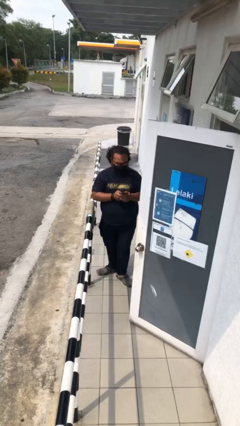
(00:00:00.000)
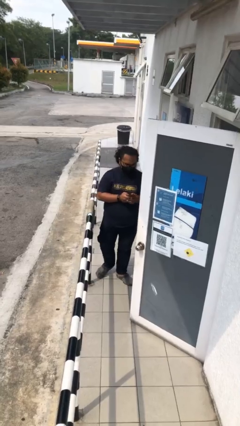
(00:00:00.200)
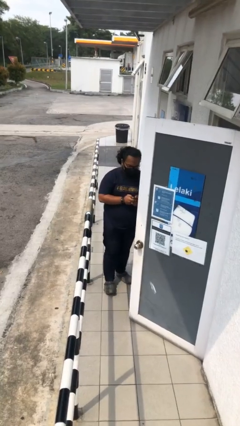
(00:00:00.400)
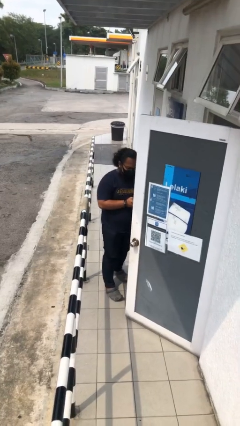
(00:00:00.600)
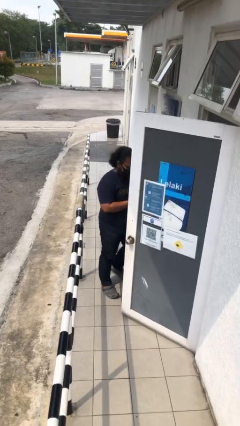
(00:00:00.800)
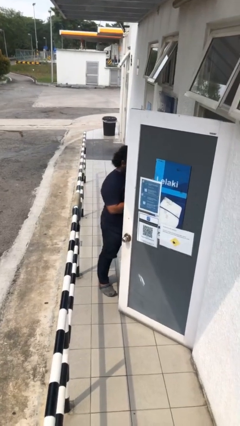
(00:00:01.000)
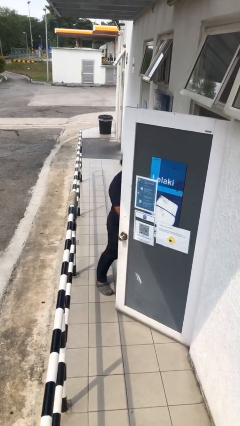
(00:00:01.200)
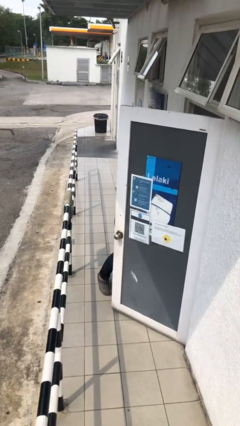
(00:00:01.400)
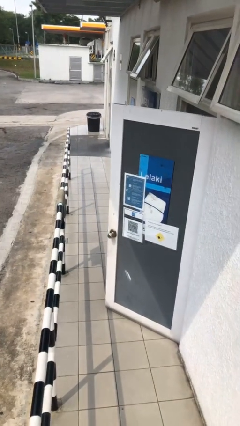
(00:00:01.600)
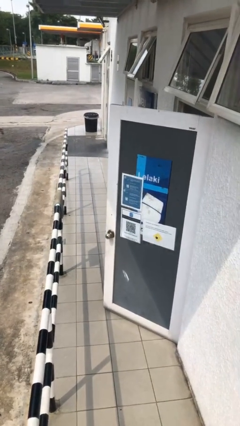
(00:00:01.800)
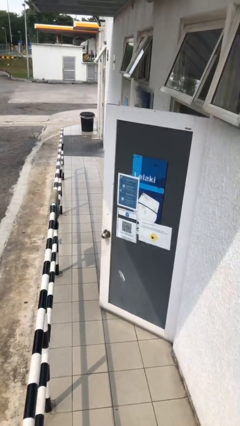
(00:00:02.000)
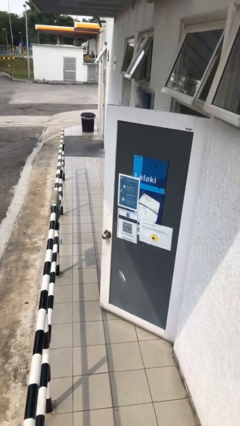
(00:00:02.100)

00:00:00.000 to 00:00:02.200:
person exits scene through structure

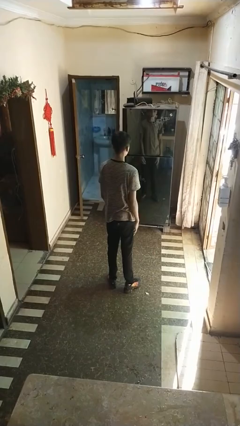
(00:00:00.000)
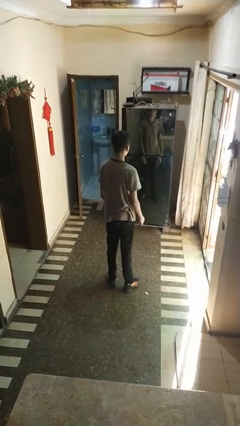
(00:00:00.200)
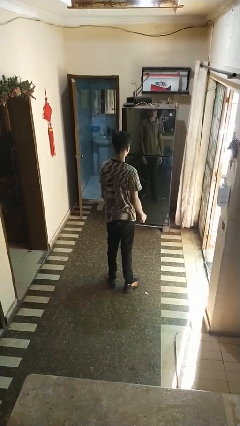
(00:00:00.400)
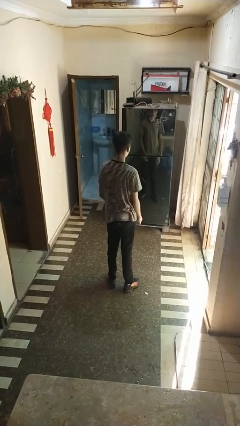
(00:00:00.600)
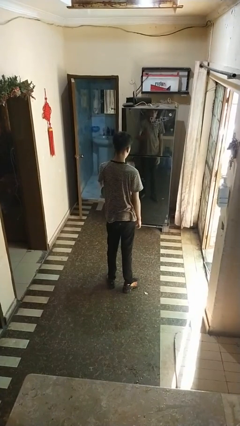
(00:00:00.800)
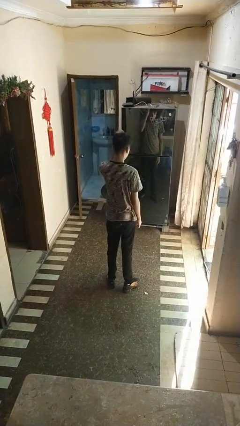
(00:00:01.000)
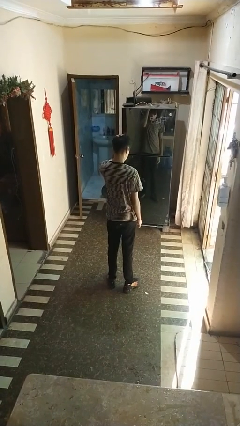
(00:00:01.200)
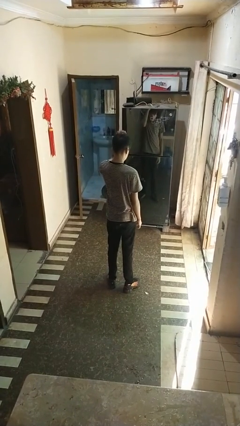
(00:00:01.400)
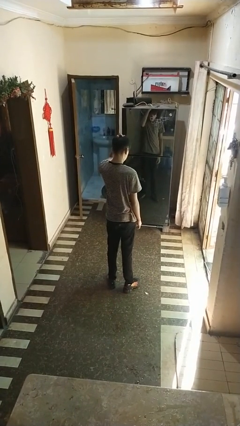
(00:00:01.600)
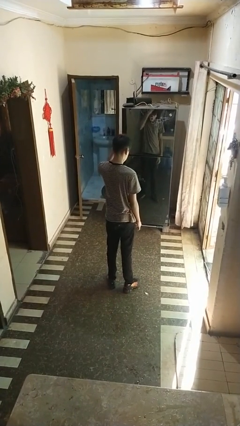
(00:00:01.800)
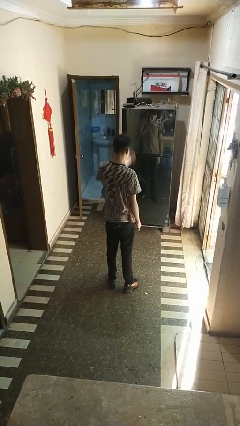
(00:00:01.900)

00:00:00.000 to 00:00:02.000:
person pats head

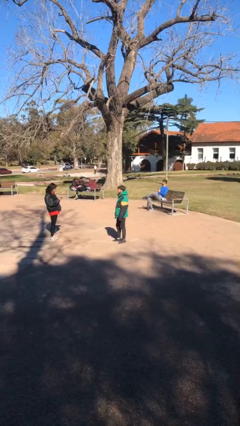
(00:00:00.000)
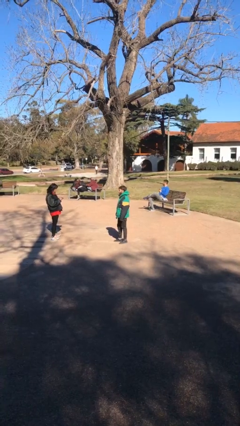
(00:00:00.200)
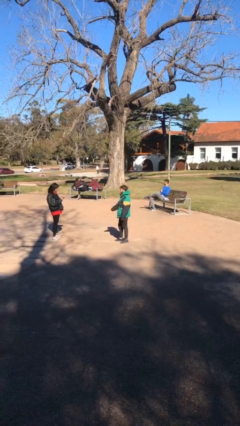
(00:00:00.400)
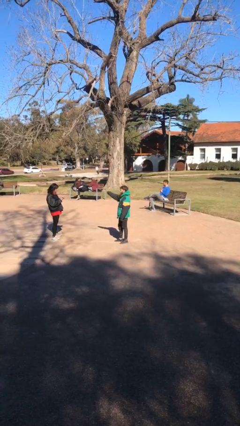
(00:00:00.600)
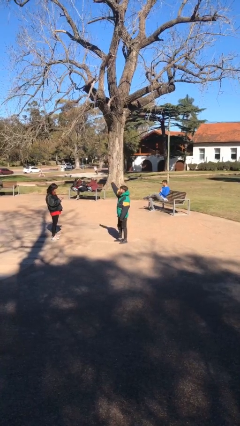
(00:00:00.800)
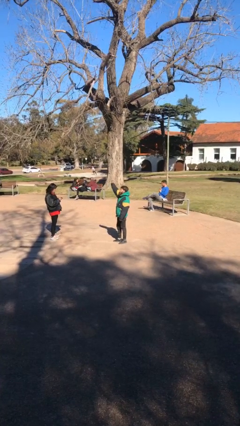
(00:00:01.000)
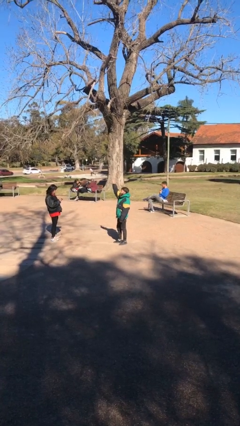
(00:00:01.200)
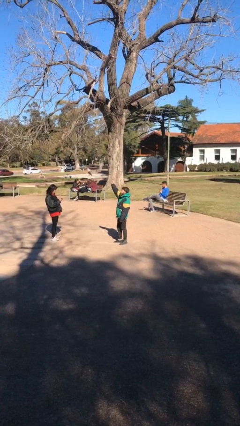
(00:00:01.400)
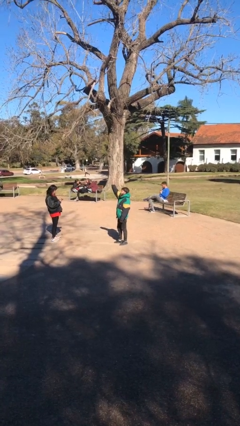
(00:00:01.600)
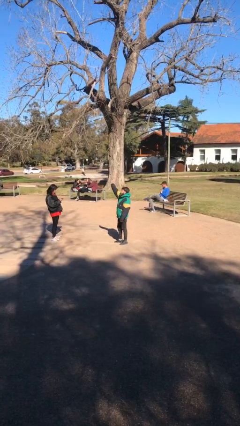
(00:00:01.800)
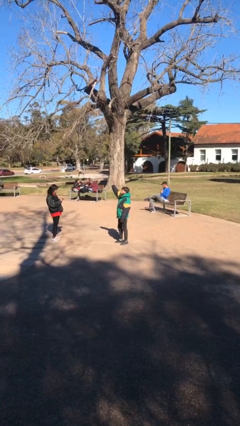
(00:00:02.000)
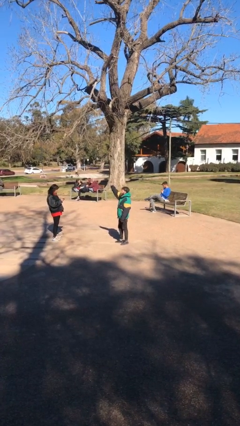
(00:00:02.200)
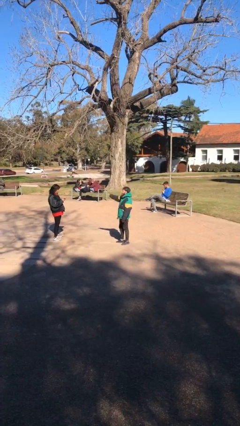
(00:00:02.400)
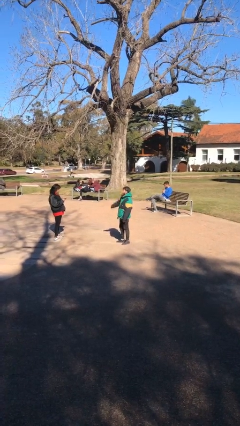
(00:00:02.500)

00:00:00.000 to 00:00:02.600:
person waves at person

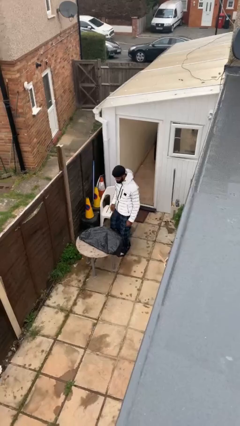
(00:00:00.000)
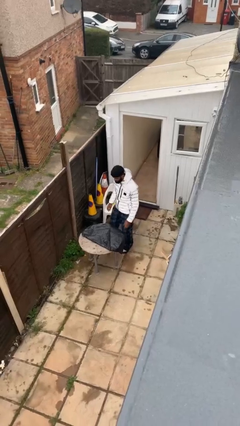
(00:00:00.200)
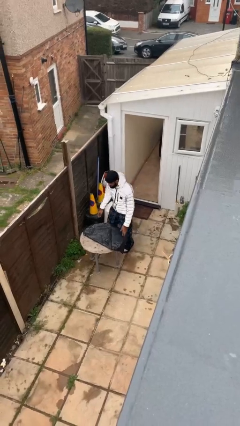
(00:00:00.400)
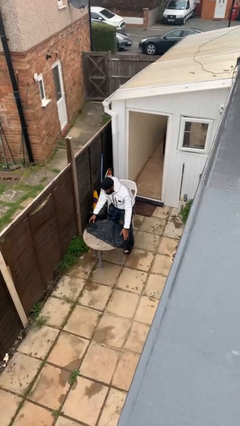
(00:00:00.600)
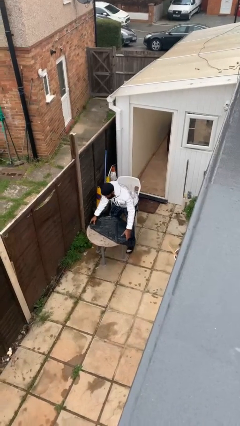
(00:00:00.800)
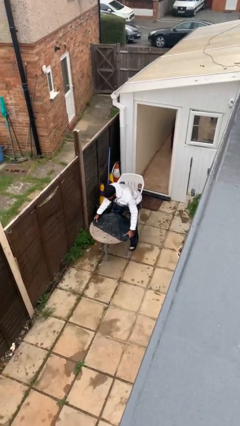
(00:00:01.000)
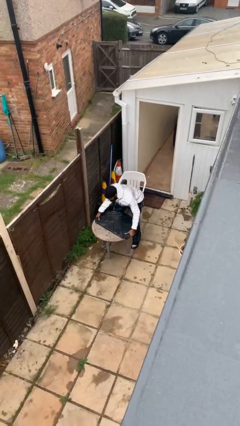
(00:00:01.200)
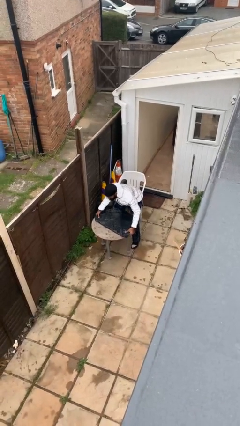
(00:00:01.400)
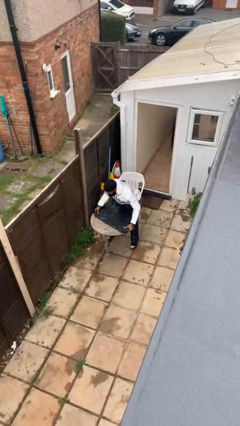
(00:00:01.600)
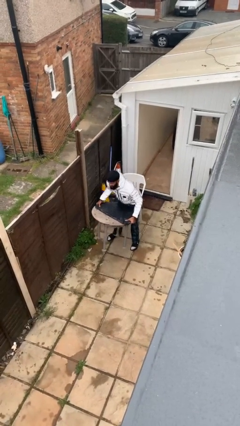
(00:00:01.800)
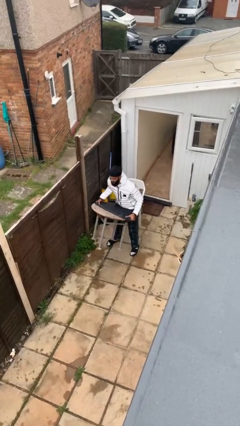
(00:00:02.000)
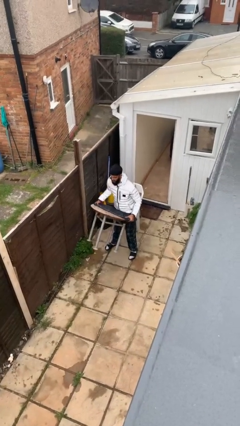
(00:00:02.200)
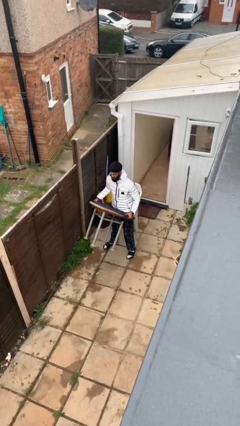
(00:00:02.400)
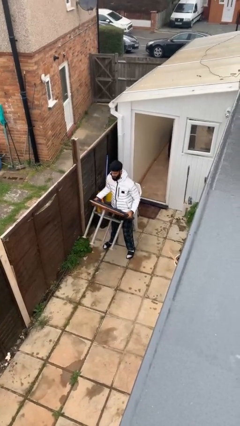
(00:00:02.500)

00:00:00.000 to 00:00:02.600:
person picks up object from floor

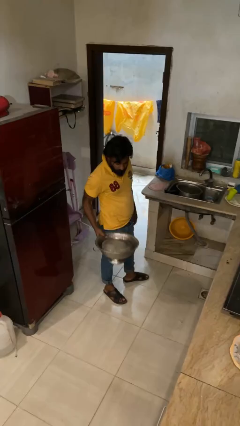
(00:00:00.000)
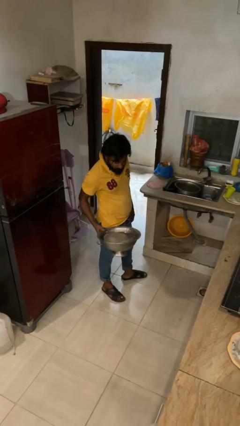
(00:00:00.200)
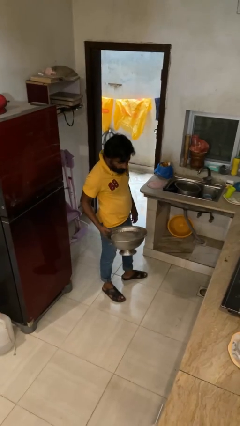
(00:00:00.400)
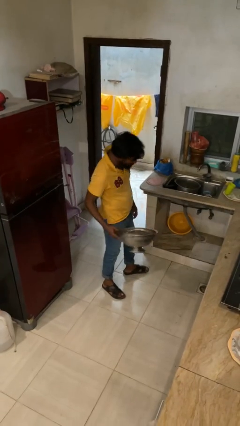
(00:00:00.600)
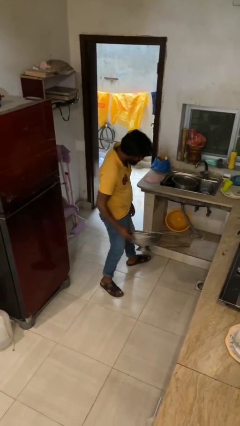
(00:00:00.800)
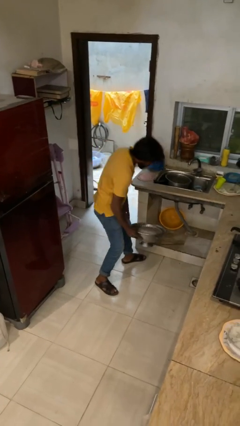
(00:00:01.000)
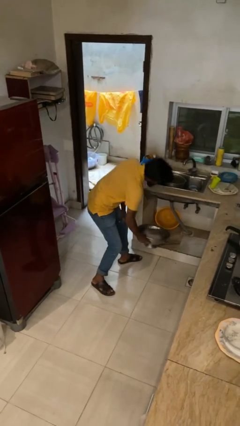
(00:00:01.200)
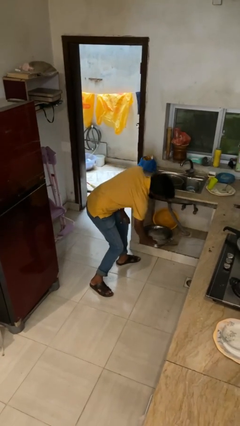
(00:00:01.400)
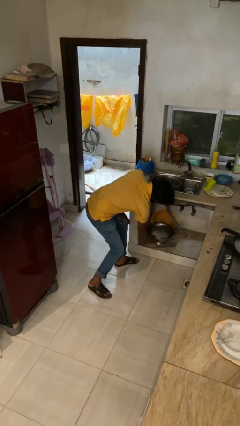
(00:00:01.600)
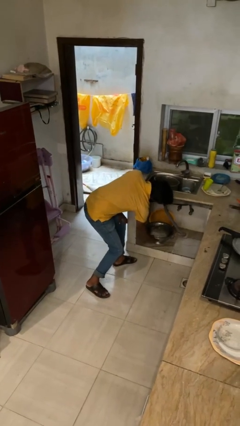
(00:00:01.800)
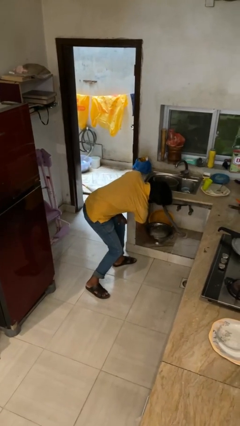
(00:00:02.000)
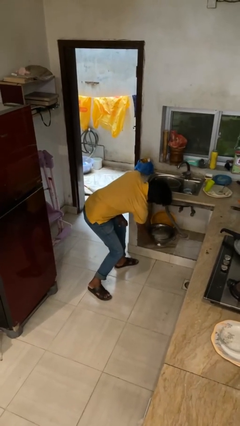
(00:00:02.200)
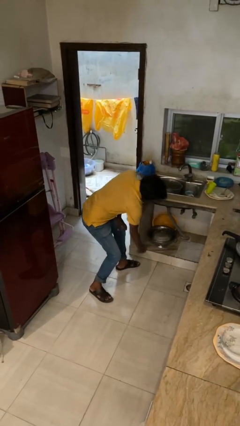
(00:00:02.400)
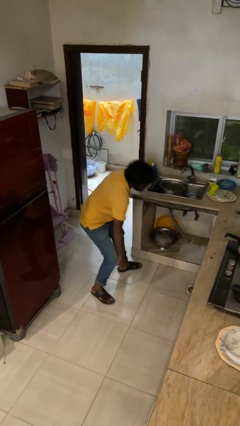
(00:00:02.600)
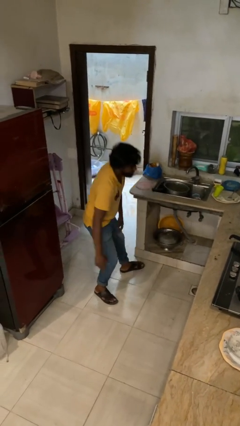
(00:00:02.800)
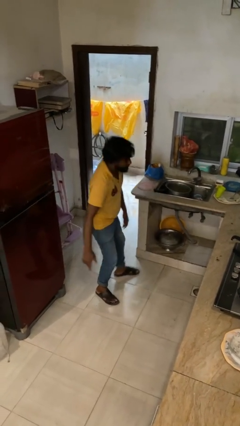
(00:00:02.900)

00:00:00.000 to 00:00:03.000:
person puts down object into cabinet

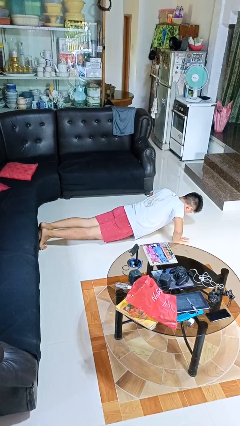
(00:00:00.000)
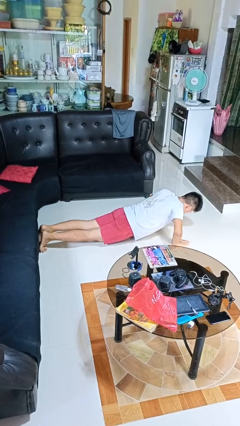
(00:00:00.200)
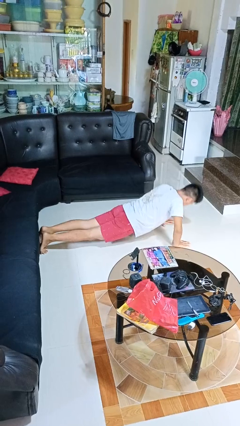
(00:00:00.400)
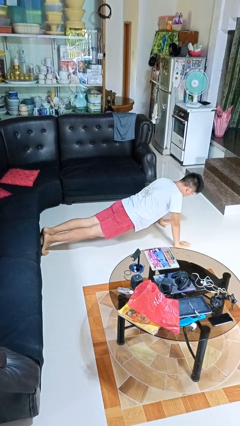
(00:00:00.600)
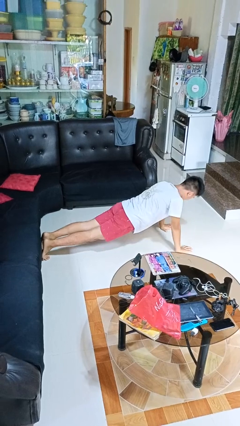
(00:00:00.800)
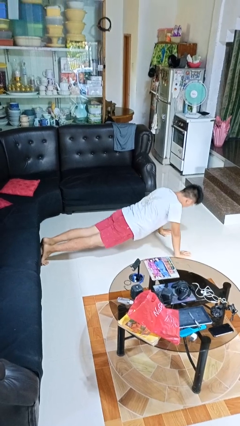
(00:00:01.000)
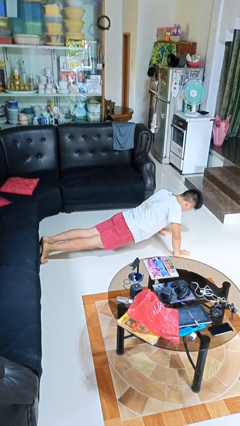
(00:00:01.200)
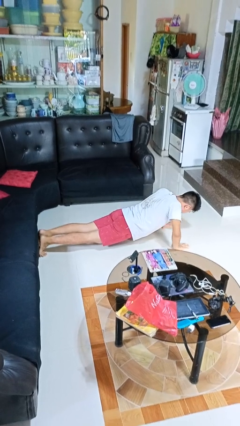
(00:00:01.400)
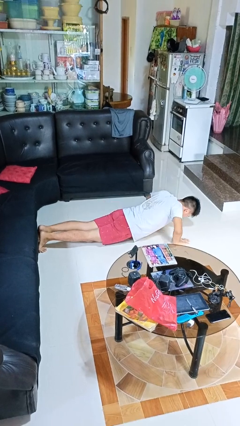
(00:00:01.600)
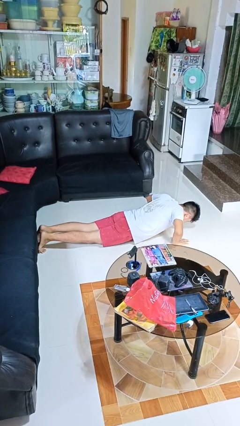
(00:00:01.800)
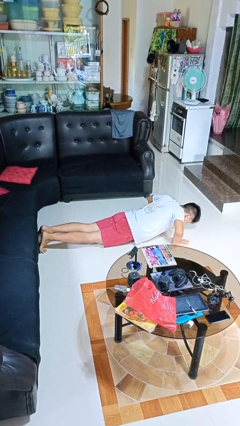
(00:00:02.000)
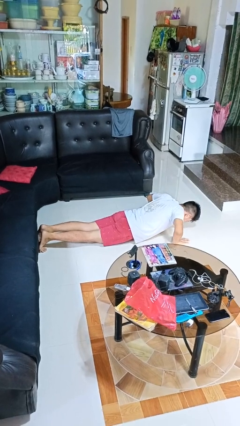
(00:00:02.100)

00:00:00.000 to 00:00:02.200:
person exercises with pushup

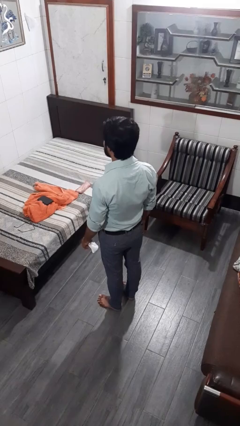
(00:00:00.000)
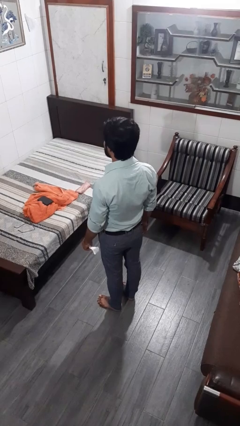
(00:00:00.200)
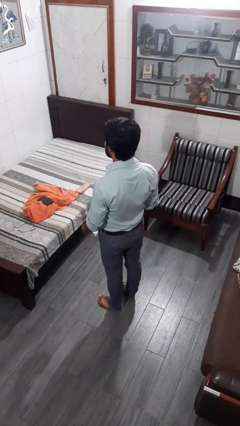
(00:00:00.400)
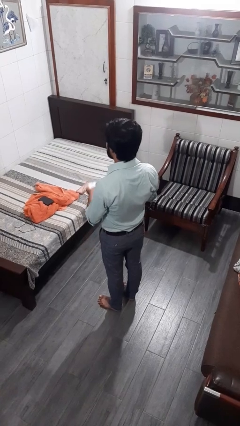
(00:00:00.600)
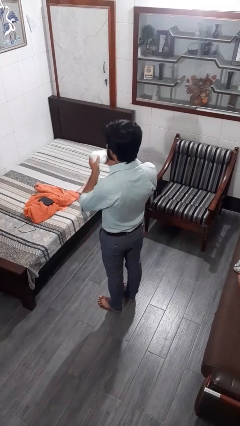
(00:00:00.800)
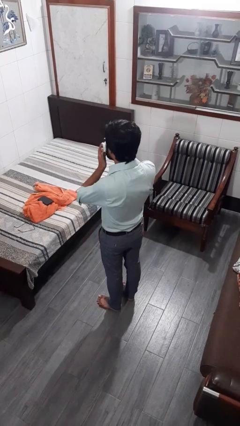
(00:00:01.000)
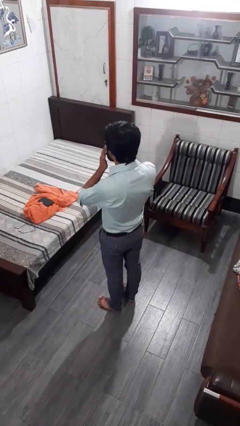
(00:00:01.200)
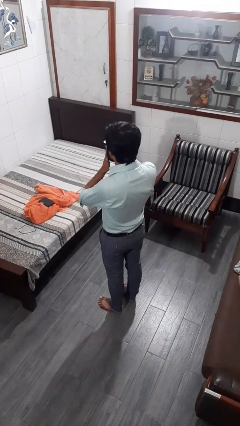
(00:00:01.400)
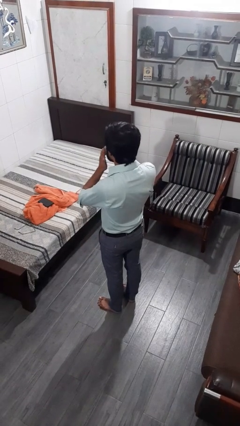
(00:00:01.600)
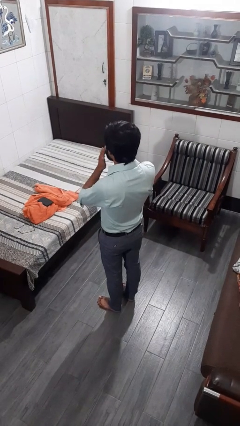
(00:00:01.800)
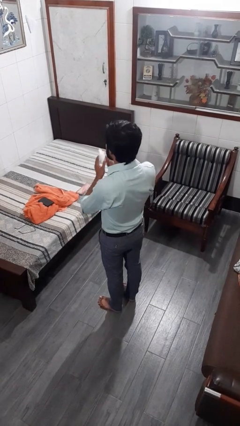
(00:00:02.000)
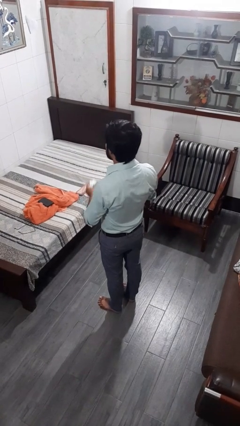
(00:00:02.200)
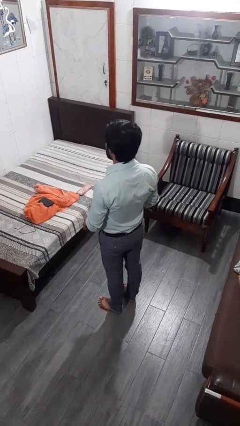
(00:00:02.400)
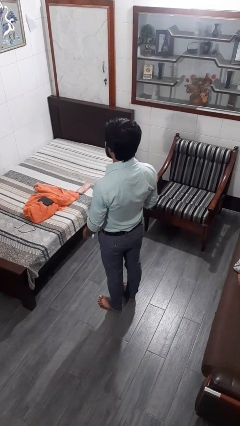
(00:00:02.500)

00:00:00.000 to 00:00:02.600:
person blows nose
